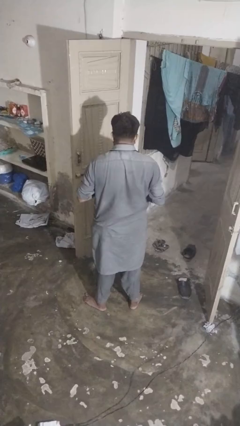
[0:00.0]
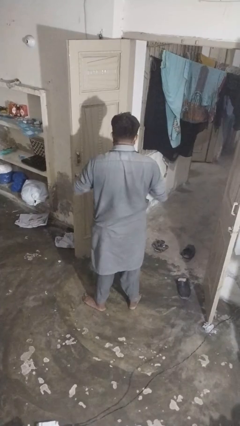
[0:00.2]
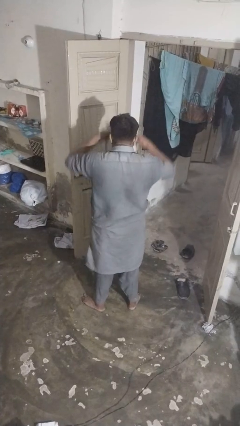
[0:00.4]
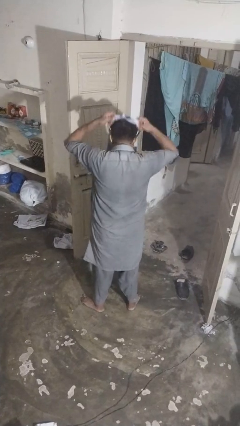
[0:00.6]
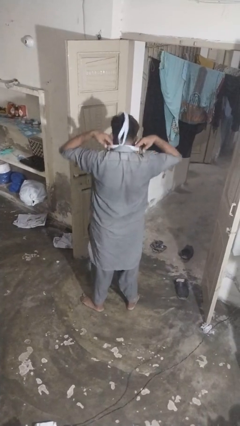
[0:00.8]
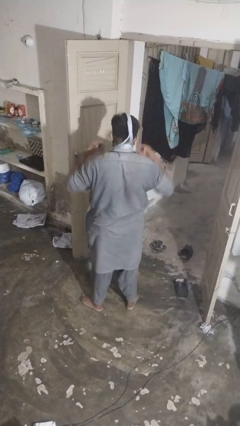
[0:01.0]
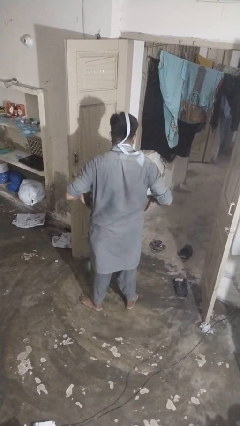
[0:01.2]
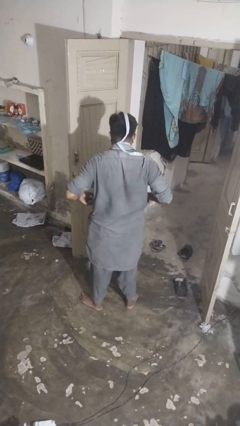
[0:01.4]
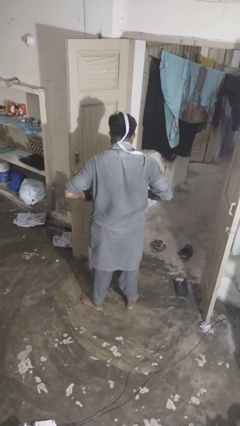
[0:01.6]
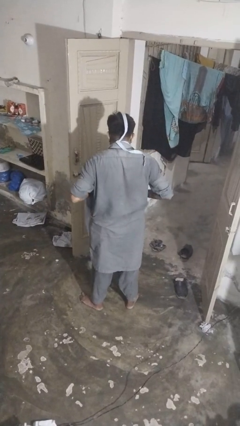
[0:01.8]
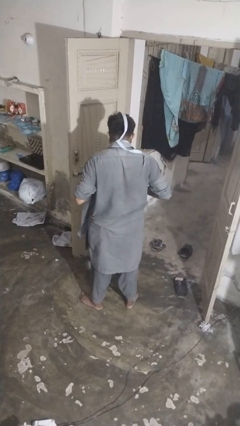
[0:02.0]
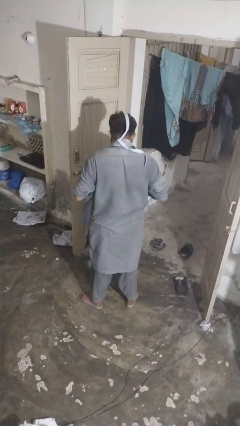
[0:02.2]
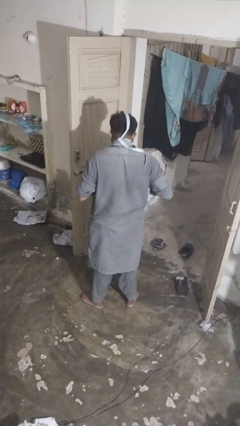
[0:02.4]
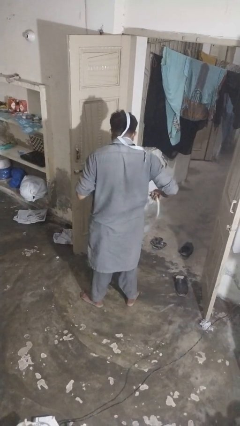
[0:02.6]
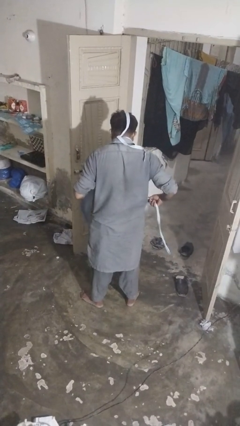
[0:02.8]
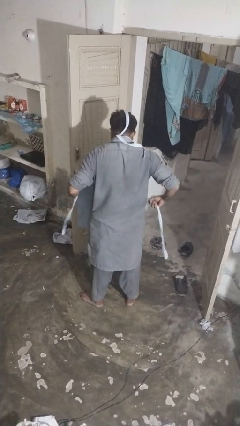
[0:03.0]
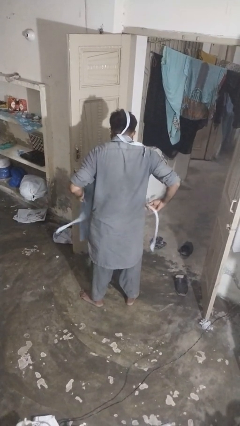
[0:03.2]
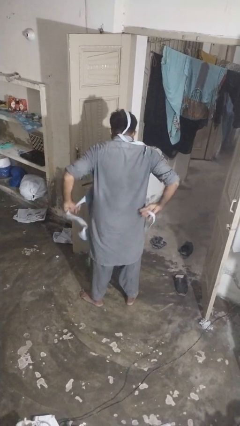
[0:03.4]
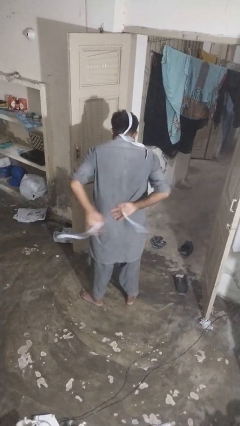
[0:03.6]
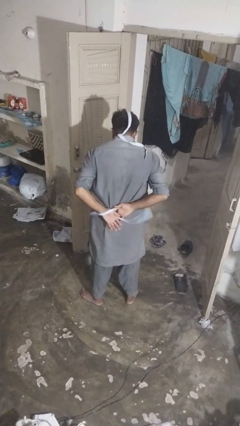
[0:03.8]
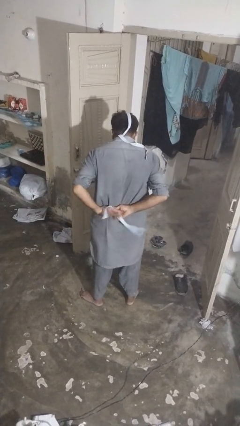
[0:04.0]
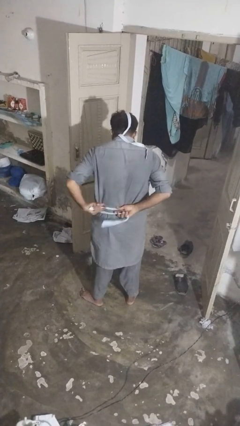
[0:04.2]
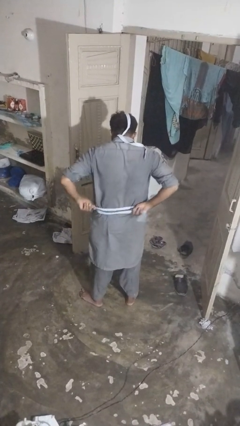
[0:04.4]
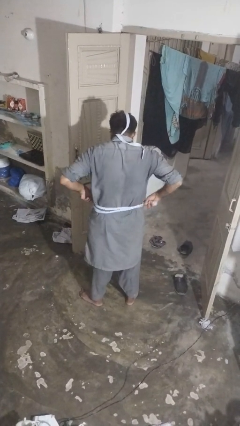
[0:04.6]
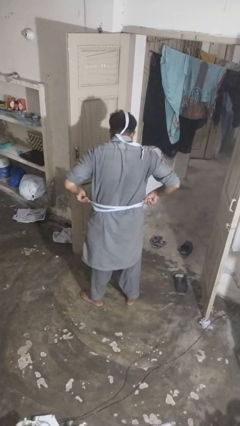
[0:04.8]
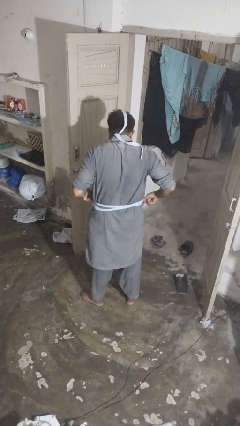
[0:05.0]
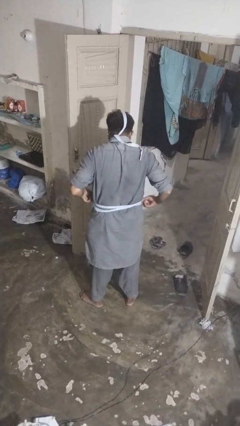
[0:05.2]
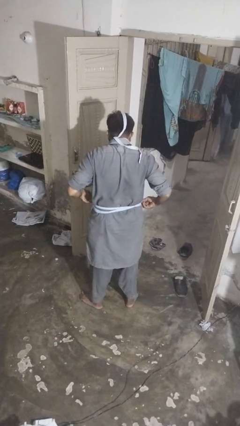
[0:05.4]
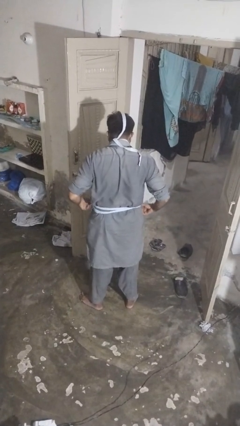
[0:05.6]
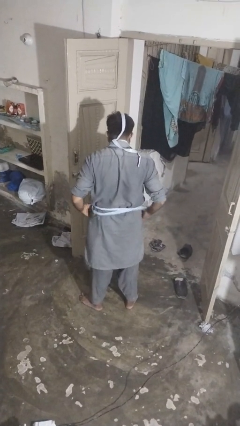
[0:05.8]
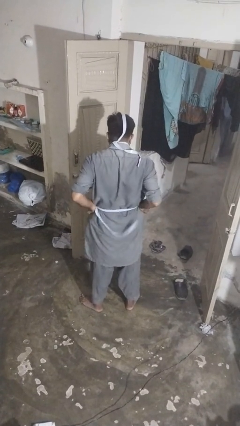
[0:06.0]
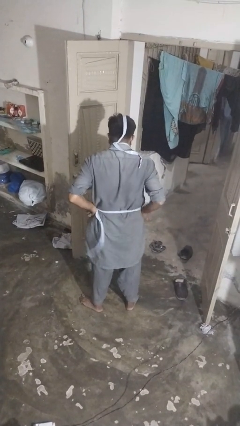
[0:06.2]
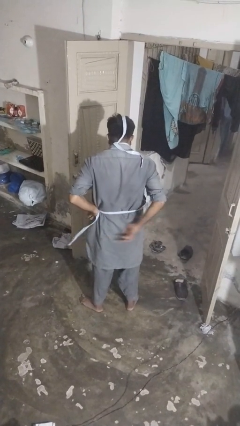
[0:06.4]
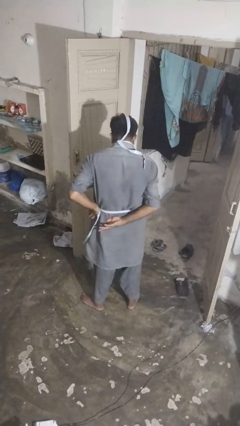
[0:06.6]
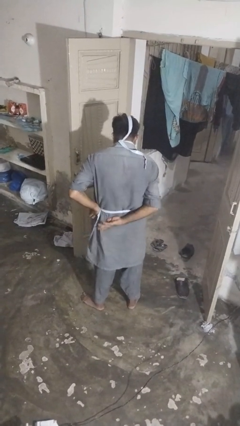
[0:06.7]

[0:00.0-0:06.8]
person puts on apron

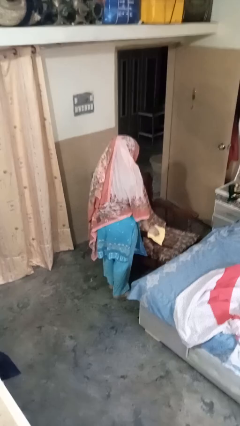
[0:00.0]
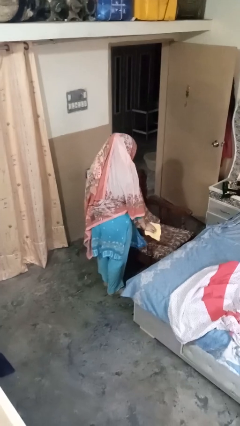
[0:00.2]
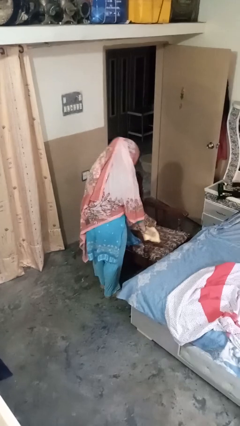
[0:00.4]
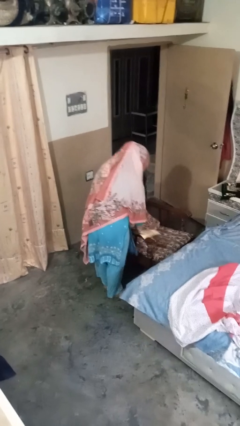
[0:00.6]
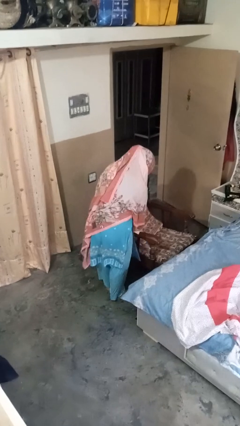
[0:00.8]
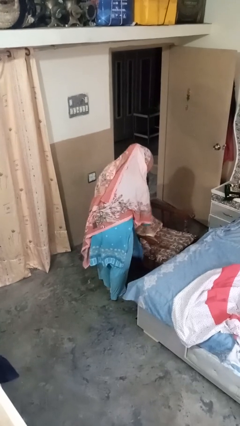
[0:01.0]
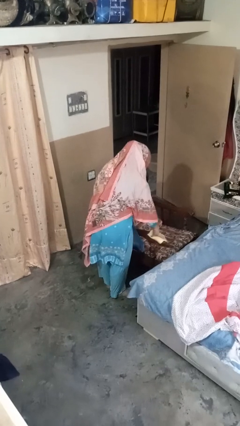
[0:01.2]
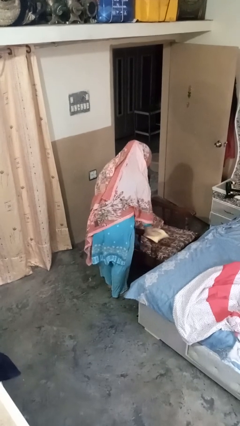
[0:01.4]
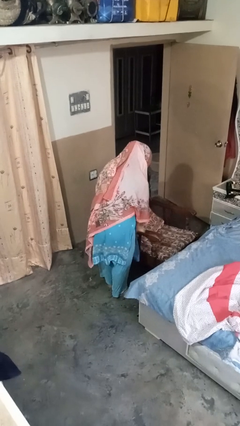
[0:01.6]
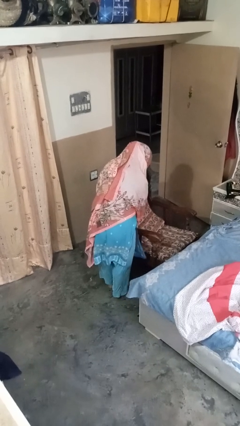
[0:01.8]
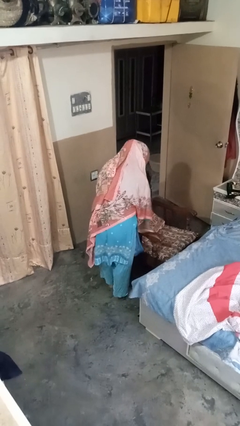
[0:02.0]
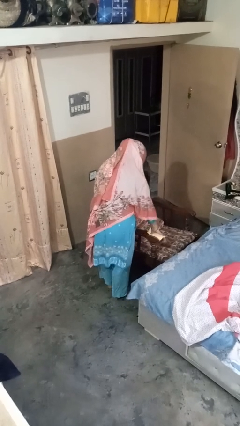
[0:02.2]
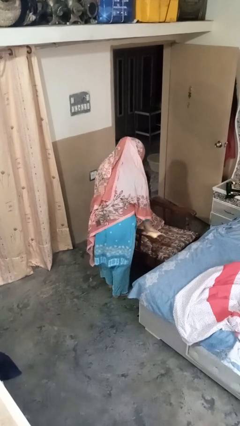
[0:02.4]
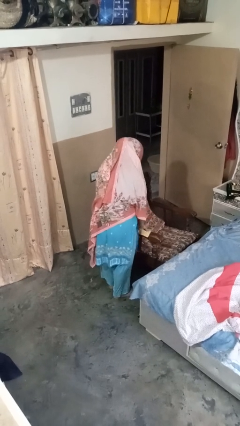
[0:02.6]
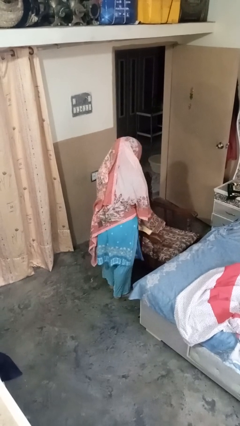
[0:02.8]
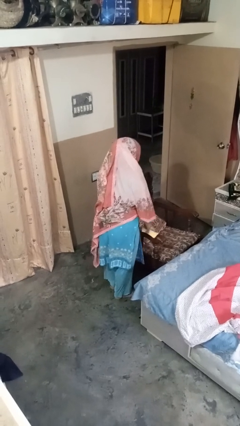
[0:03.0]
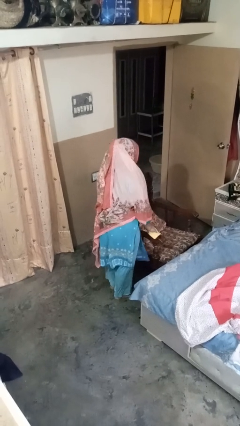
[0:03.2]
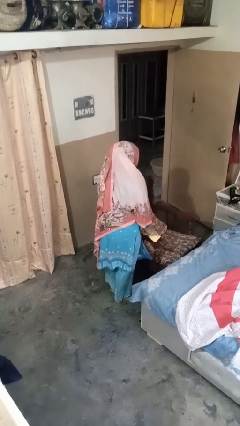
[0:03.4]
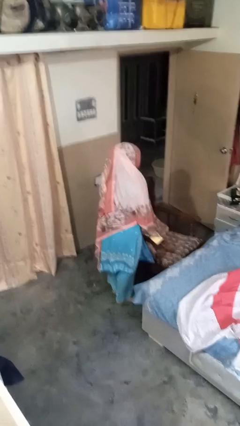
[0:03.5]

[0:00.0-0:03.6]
person dusts furniture

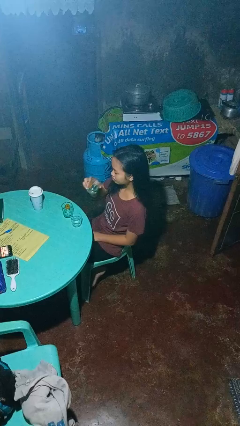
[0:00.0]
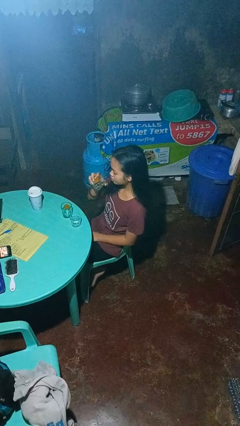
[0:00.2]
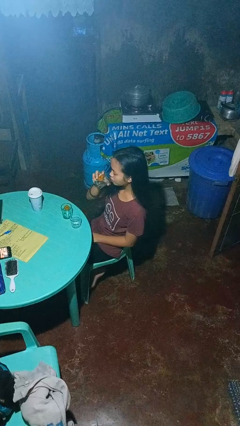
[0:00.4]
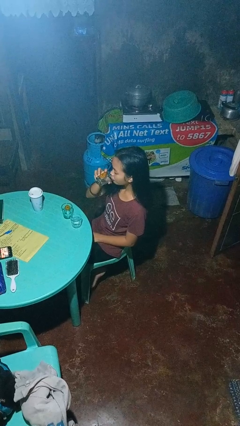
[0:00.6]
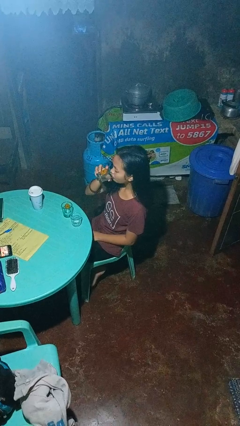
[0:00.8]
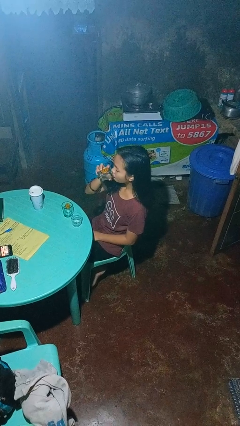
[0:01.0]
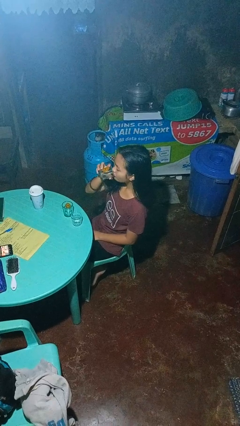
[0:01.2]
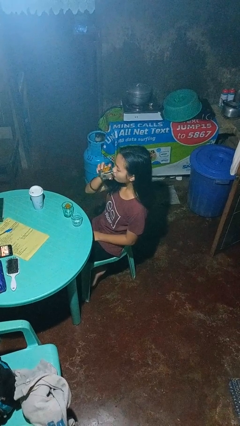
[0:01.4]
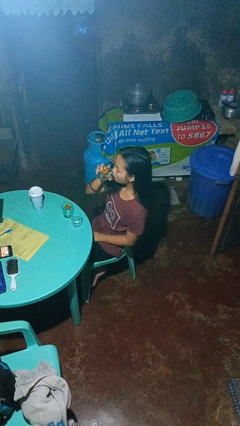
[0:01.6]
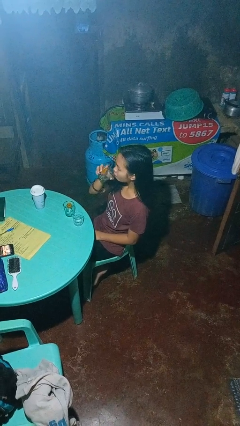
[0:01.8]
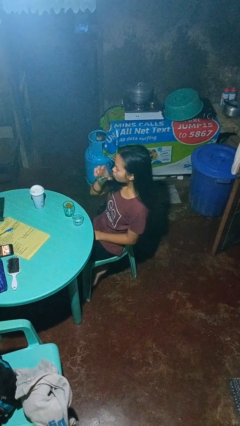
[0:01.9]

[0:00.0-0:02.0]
person drinks from shotglass

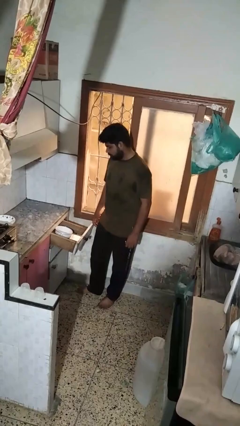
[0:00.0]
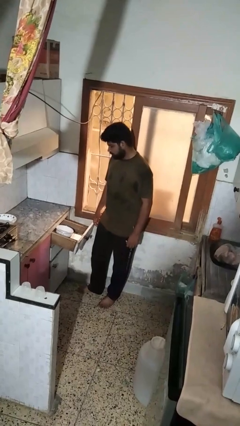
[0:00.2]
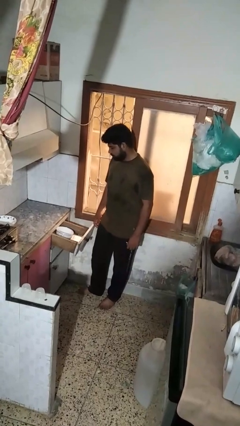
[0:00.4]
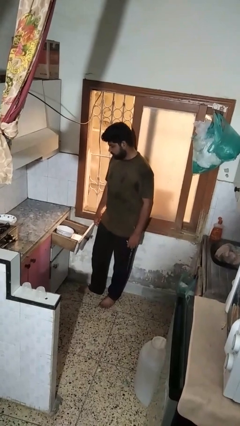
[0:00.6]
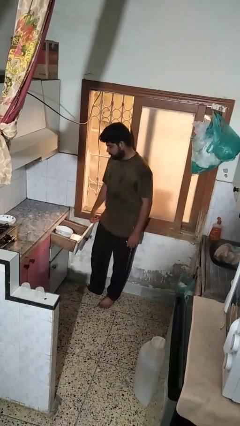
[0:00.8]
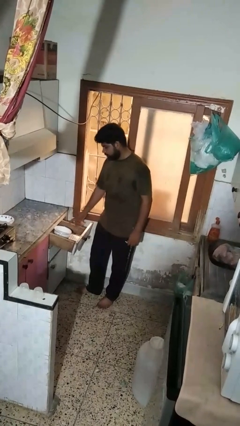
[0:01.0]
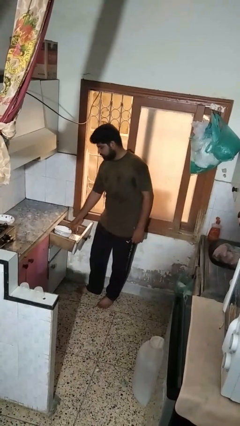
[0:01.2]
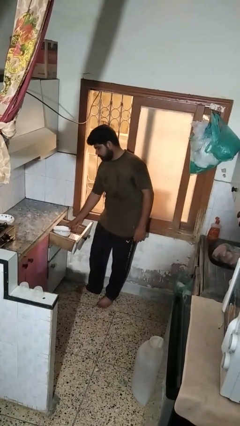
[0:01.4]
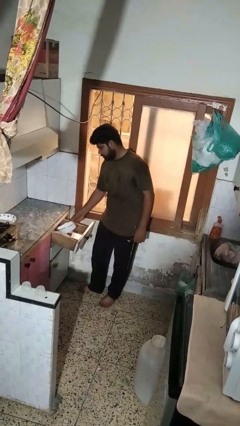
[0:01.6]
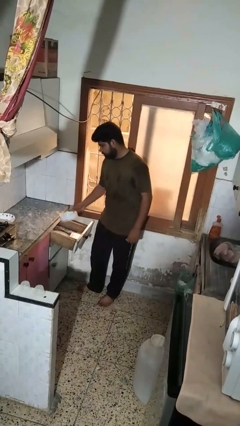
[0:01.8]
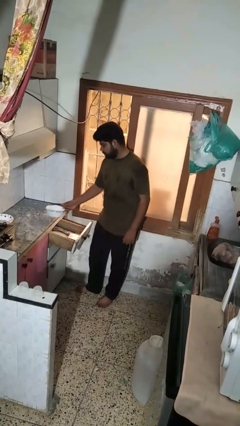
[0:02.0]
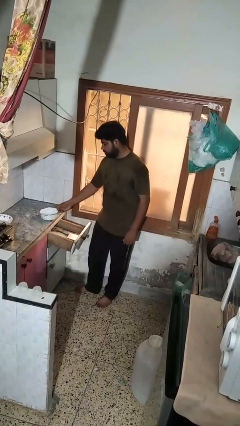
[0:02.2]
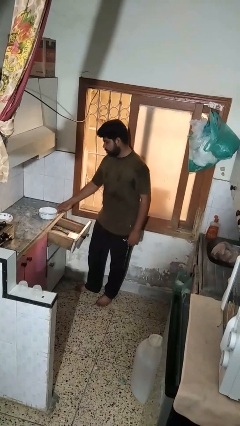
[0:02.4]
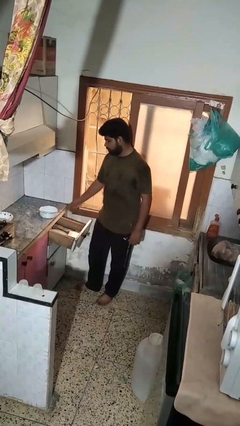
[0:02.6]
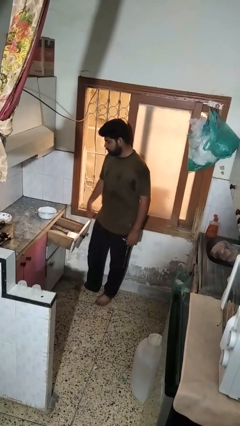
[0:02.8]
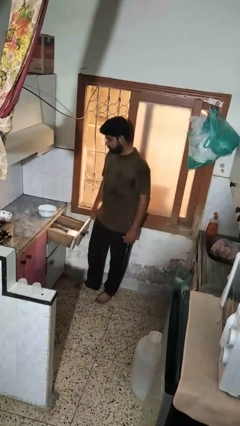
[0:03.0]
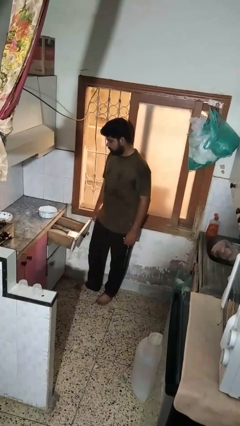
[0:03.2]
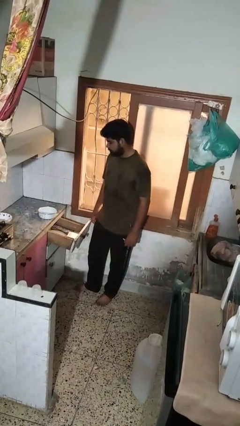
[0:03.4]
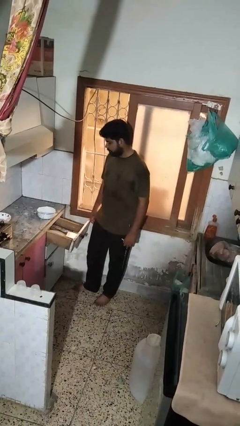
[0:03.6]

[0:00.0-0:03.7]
person takes object from kitchen drawer

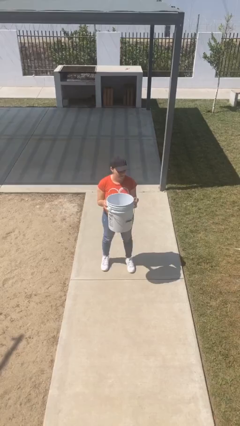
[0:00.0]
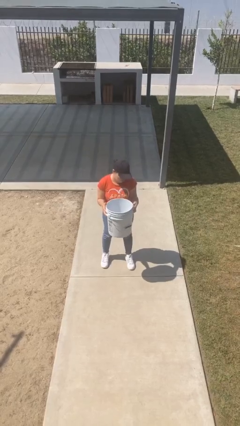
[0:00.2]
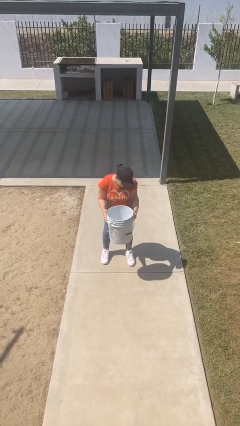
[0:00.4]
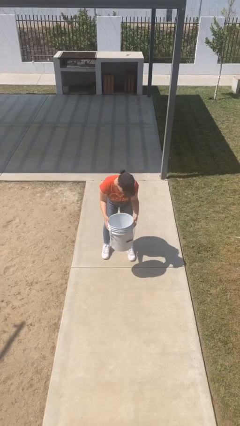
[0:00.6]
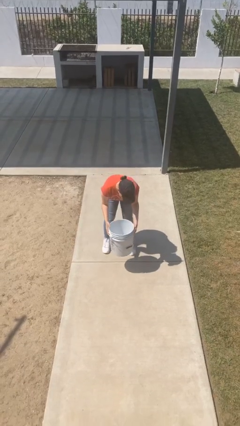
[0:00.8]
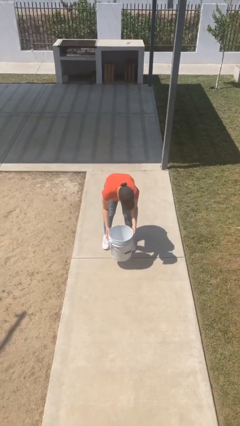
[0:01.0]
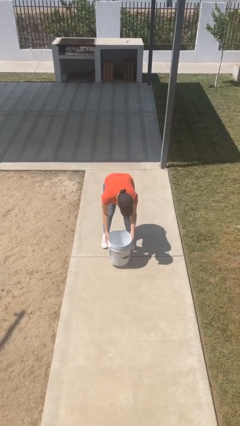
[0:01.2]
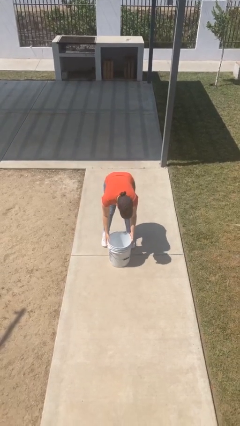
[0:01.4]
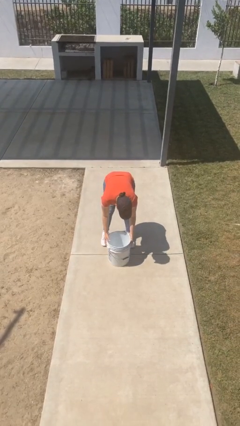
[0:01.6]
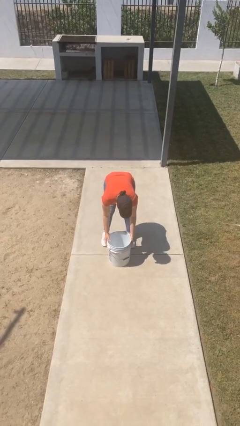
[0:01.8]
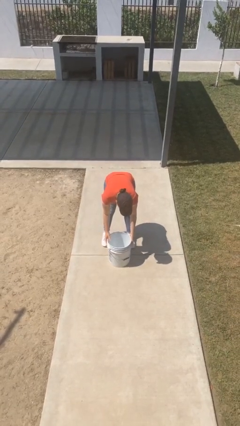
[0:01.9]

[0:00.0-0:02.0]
person puts down object on floor

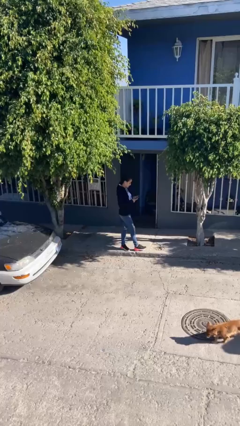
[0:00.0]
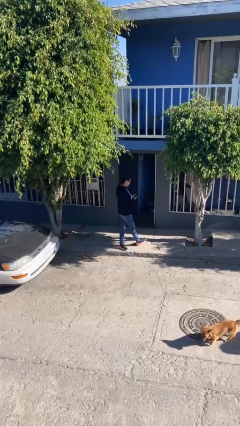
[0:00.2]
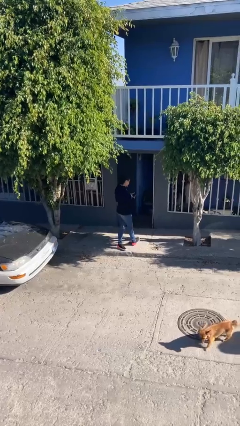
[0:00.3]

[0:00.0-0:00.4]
person exits scene through structure
